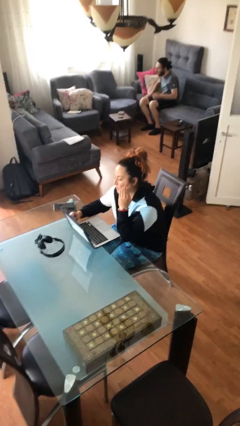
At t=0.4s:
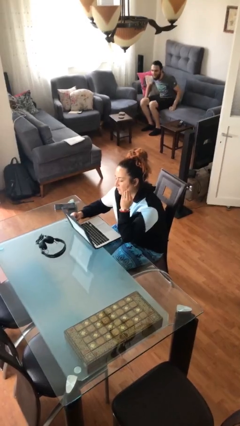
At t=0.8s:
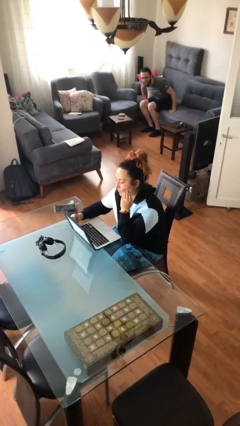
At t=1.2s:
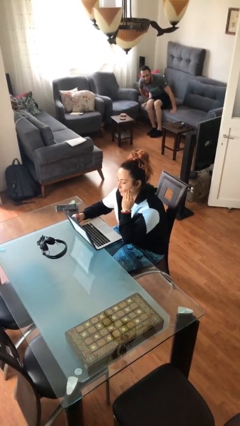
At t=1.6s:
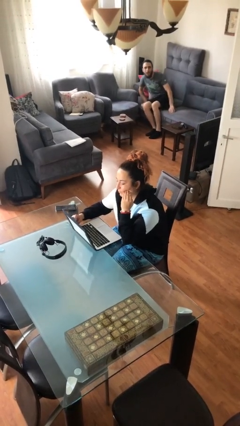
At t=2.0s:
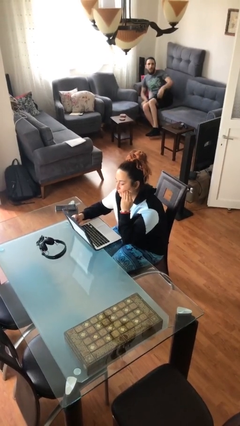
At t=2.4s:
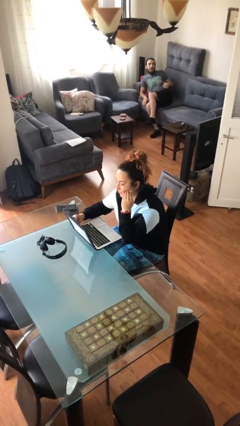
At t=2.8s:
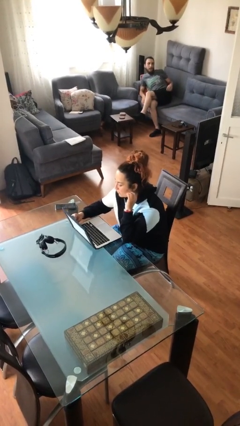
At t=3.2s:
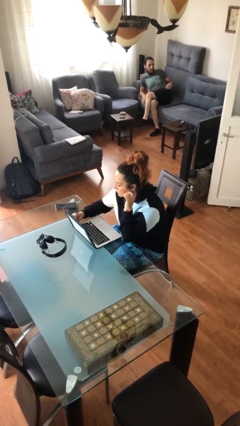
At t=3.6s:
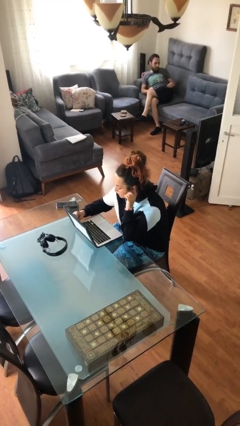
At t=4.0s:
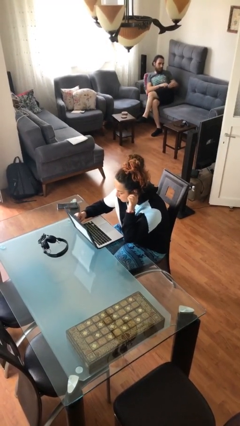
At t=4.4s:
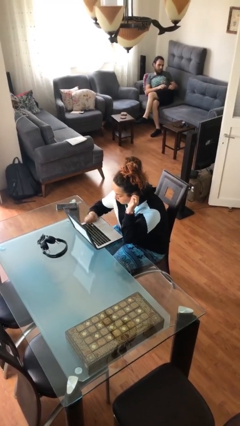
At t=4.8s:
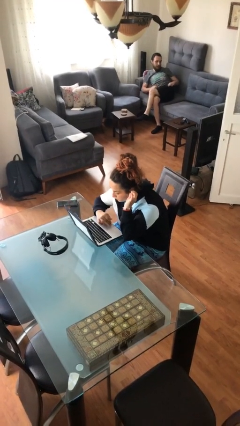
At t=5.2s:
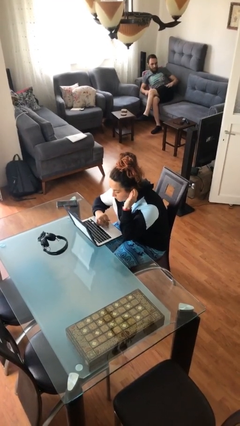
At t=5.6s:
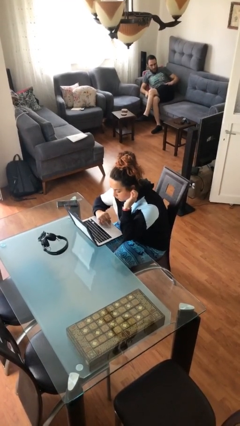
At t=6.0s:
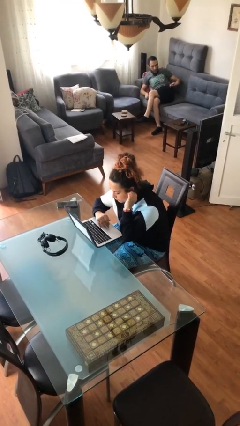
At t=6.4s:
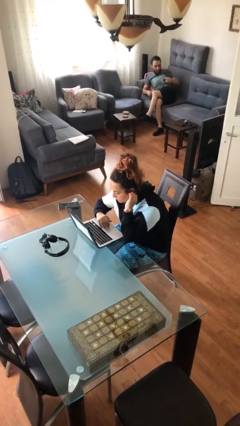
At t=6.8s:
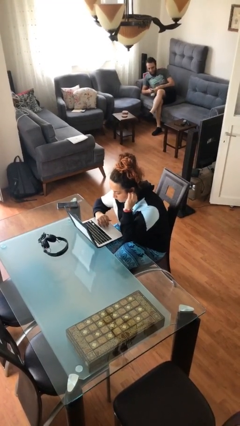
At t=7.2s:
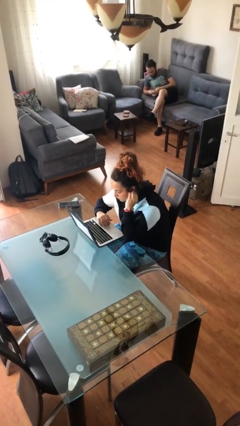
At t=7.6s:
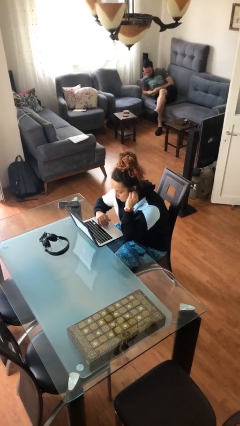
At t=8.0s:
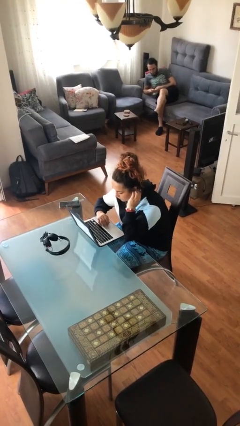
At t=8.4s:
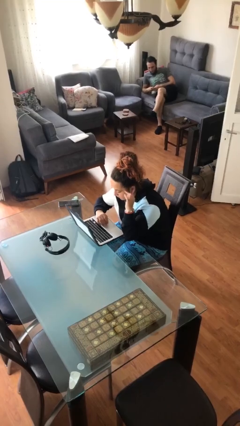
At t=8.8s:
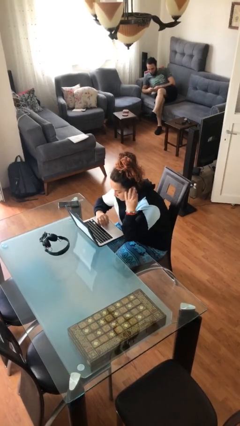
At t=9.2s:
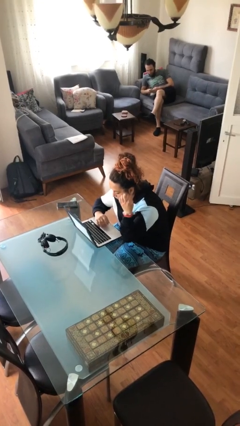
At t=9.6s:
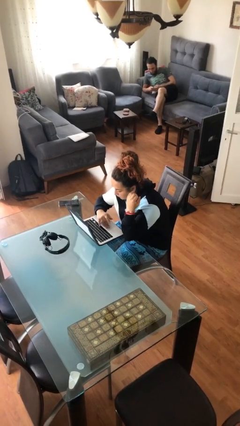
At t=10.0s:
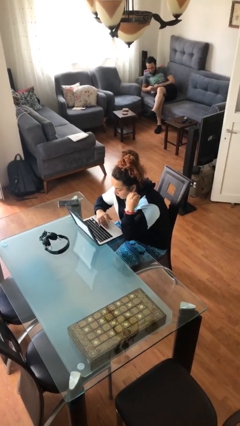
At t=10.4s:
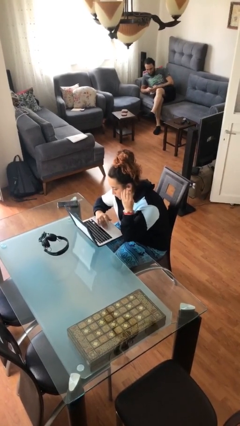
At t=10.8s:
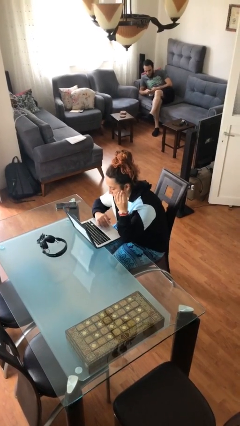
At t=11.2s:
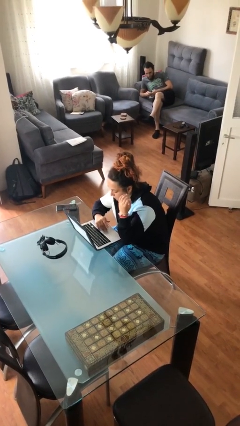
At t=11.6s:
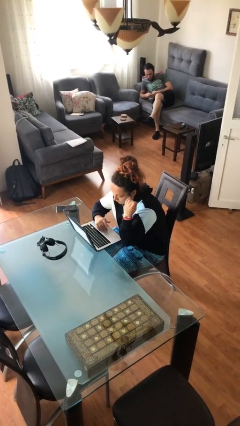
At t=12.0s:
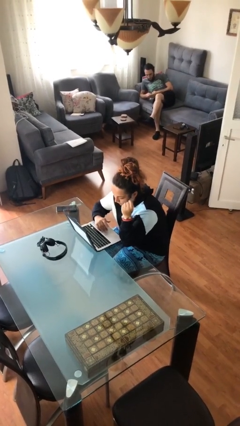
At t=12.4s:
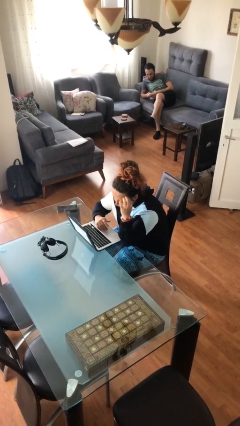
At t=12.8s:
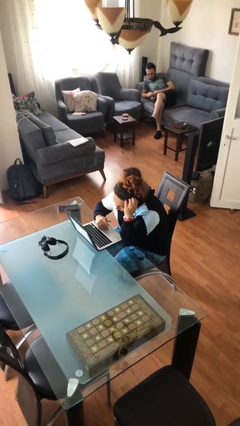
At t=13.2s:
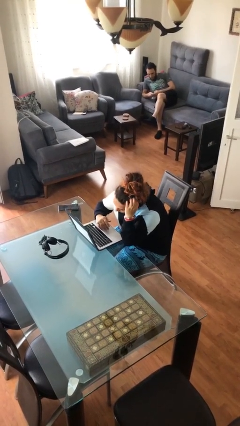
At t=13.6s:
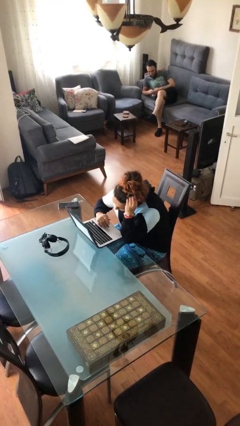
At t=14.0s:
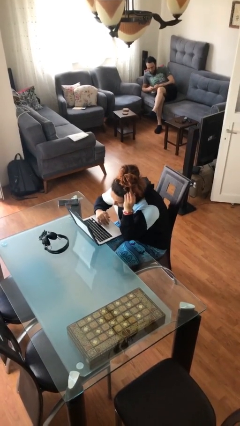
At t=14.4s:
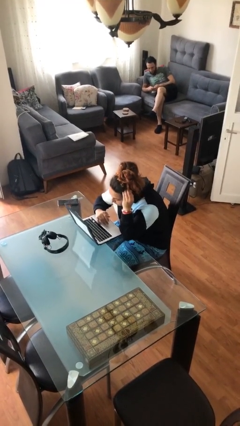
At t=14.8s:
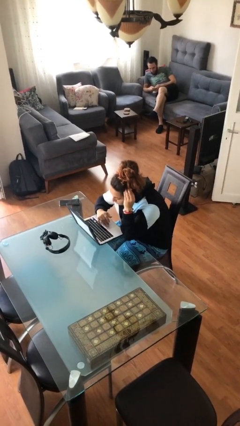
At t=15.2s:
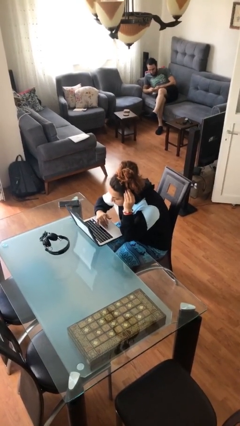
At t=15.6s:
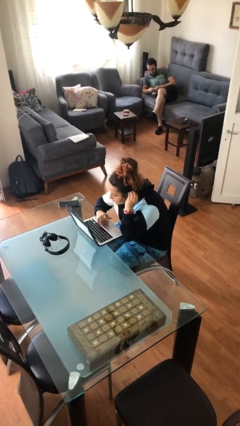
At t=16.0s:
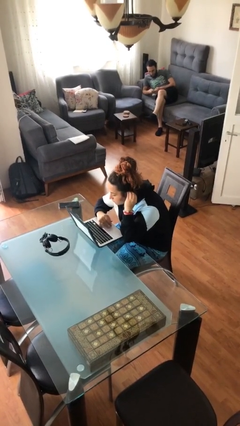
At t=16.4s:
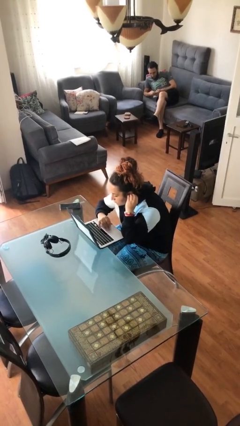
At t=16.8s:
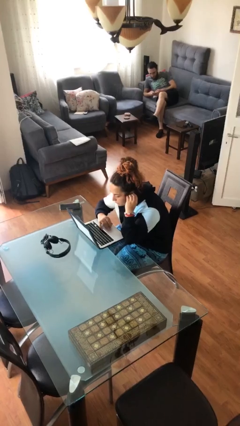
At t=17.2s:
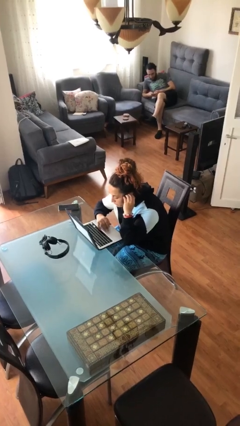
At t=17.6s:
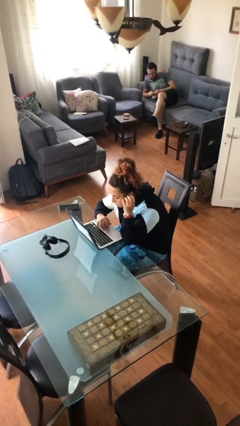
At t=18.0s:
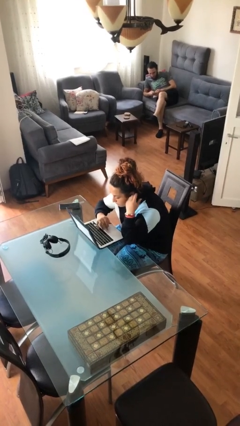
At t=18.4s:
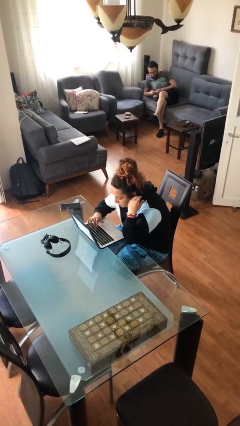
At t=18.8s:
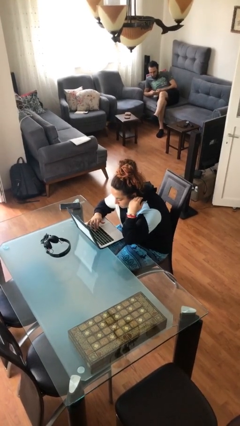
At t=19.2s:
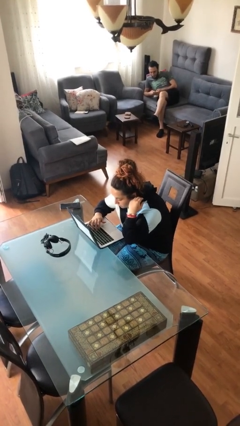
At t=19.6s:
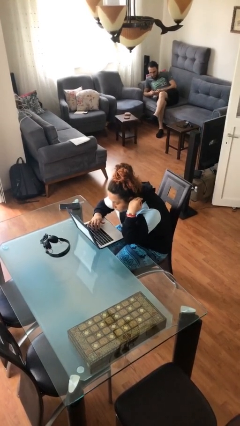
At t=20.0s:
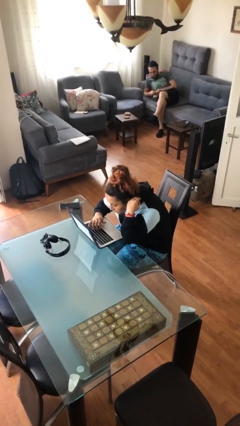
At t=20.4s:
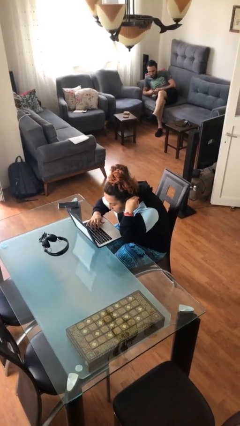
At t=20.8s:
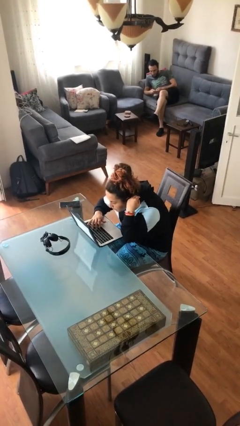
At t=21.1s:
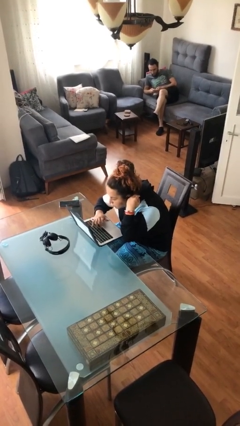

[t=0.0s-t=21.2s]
person interacts with laptop

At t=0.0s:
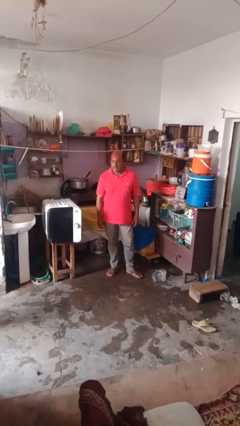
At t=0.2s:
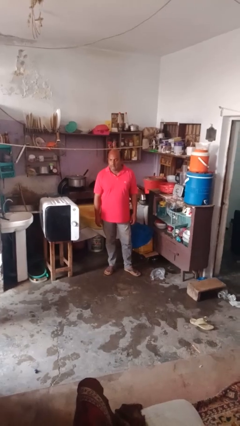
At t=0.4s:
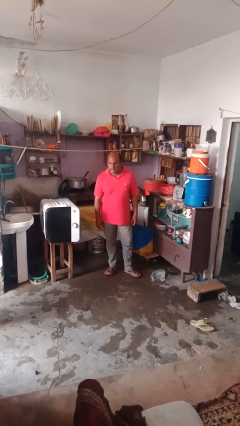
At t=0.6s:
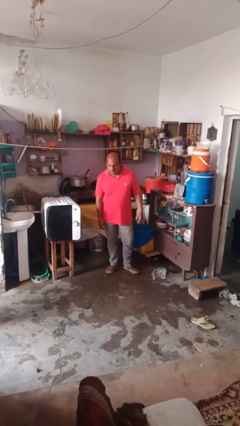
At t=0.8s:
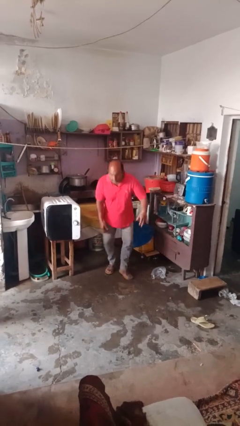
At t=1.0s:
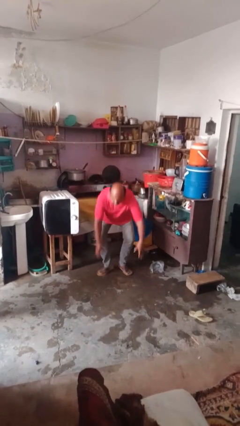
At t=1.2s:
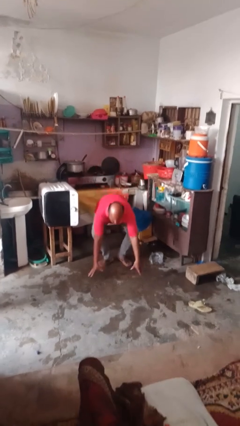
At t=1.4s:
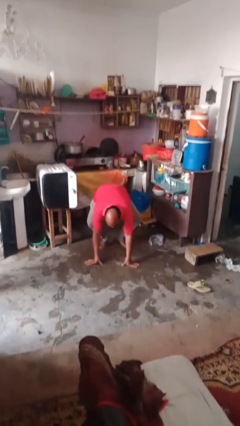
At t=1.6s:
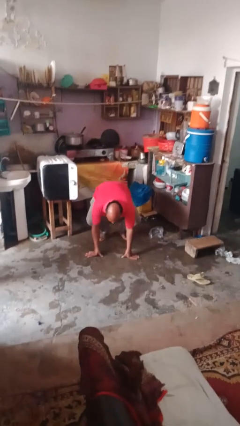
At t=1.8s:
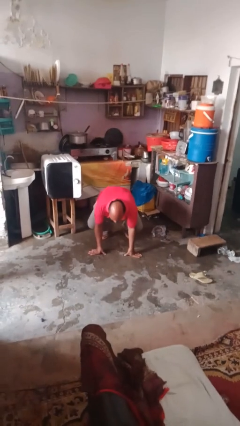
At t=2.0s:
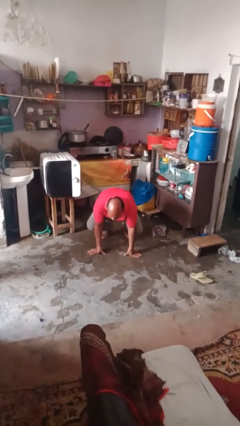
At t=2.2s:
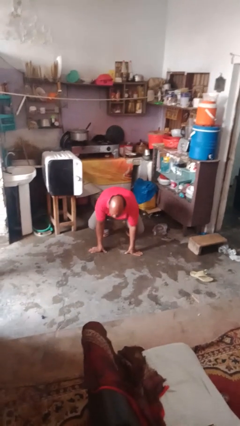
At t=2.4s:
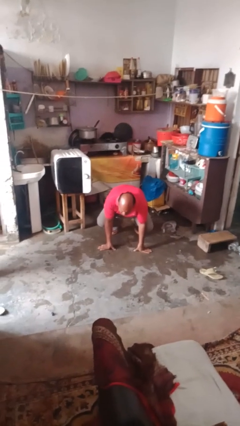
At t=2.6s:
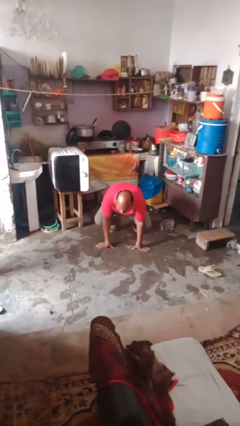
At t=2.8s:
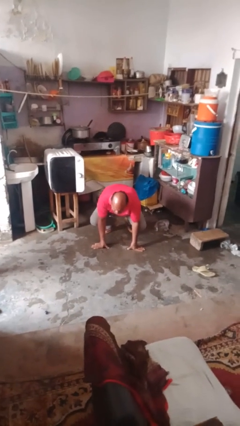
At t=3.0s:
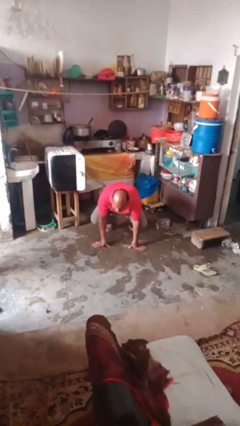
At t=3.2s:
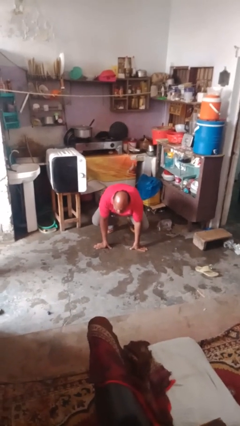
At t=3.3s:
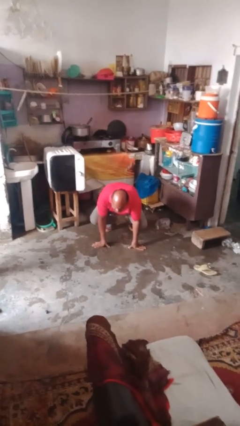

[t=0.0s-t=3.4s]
person falls while standing

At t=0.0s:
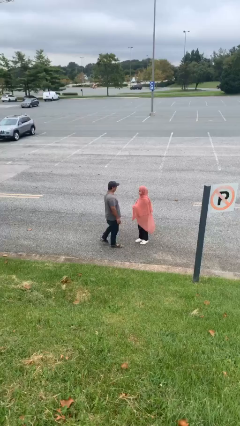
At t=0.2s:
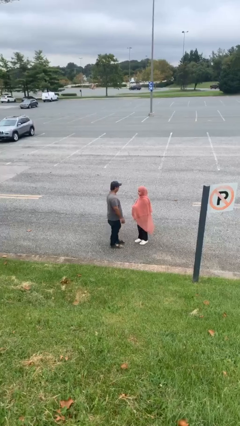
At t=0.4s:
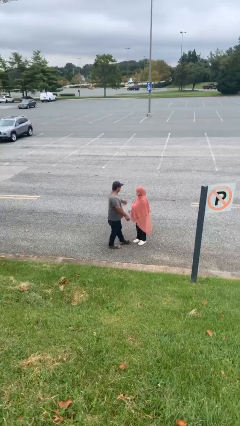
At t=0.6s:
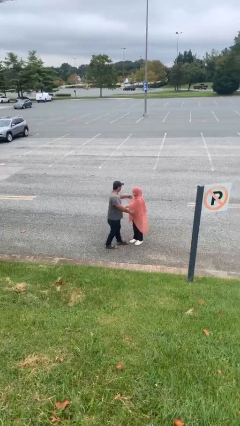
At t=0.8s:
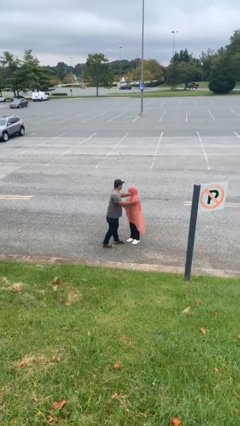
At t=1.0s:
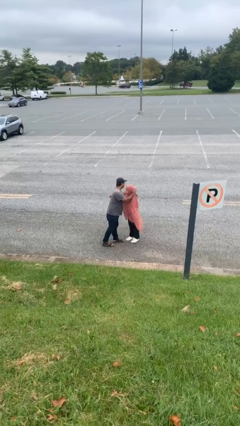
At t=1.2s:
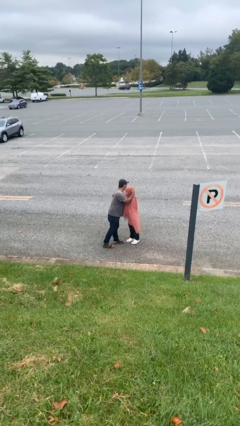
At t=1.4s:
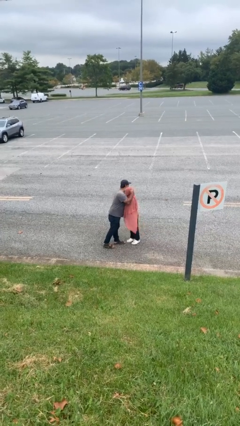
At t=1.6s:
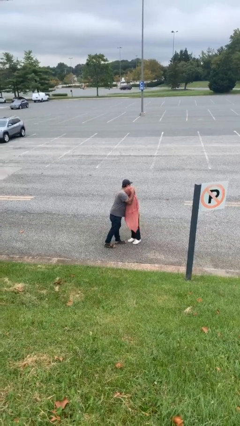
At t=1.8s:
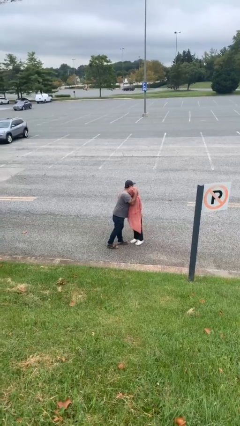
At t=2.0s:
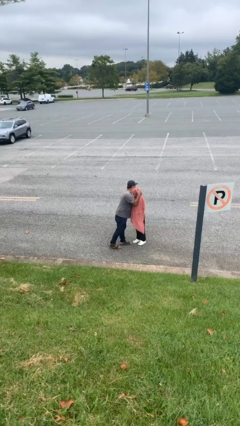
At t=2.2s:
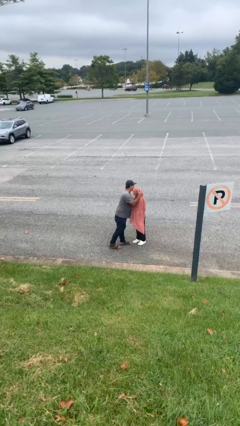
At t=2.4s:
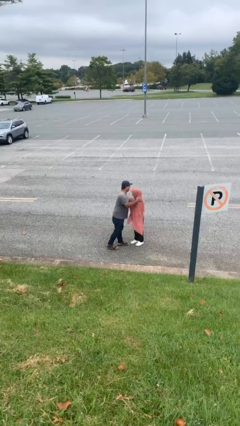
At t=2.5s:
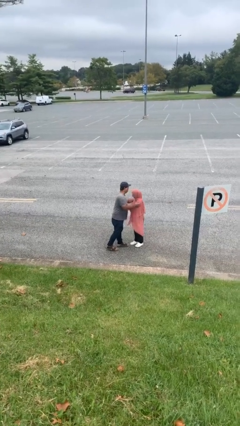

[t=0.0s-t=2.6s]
person embraces person

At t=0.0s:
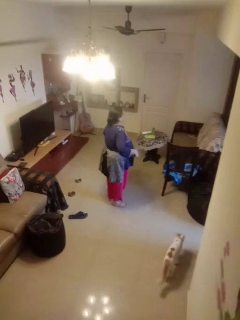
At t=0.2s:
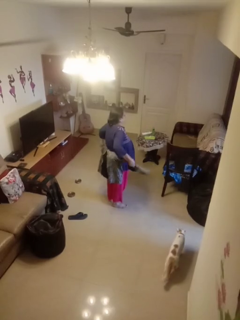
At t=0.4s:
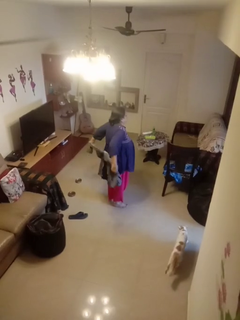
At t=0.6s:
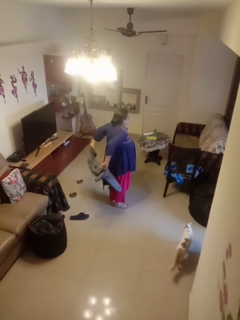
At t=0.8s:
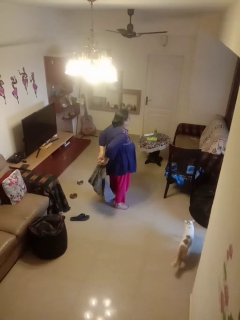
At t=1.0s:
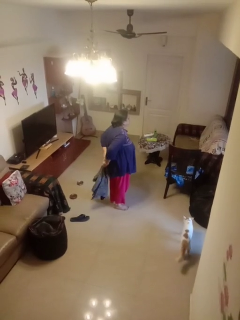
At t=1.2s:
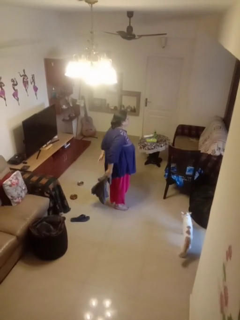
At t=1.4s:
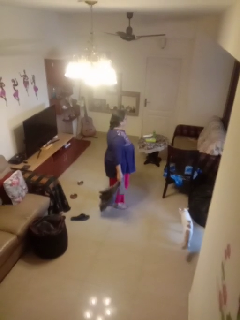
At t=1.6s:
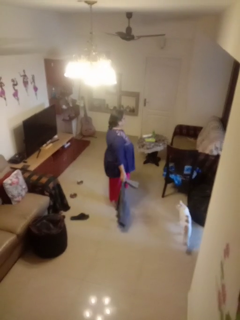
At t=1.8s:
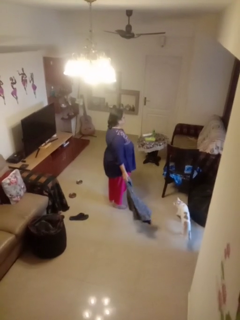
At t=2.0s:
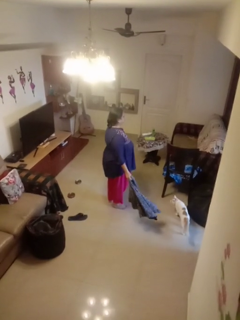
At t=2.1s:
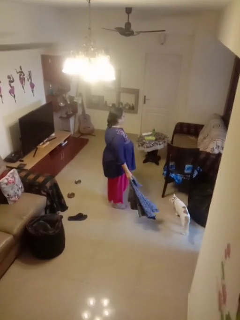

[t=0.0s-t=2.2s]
person unties jacket around waist
